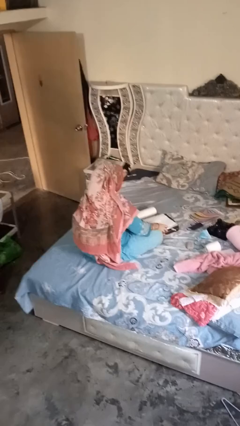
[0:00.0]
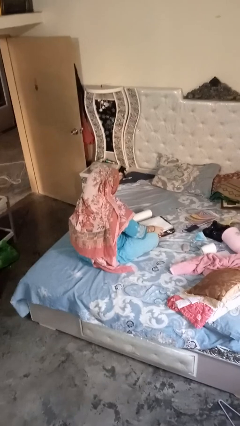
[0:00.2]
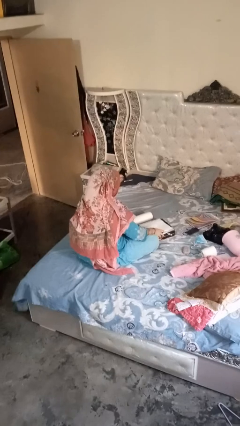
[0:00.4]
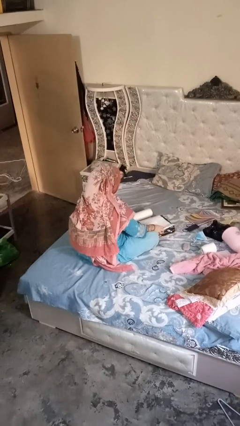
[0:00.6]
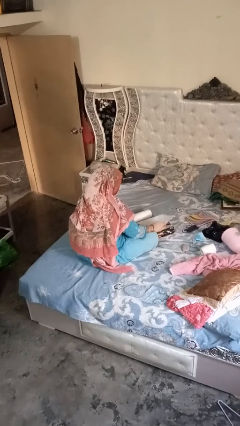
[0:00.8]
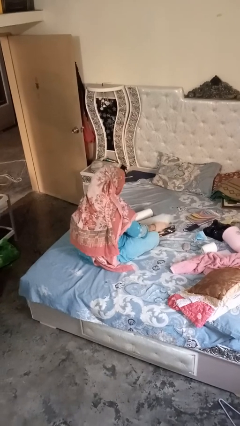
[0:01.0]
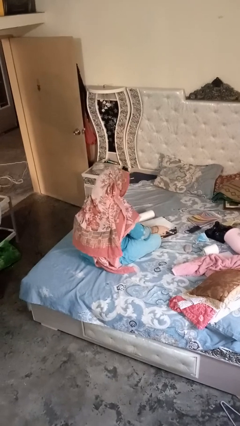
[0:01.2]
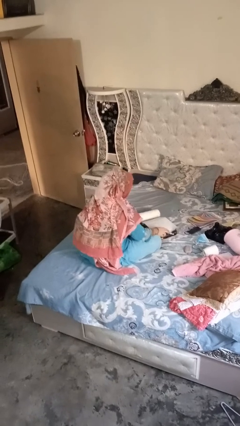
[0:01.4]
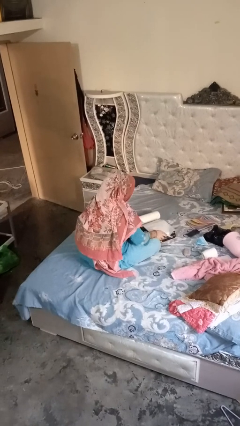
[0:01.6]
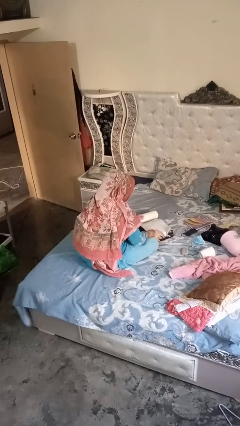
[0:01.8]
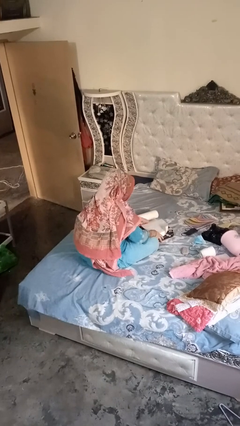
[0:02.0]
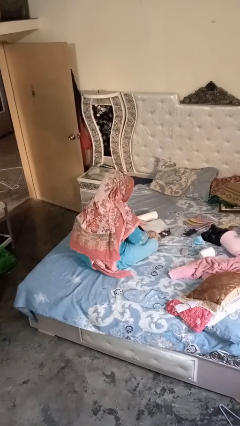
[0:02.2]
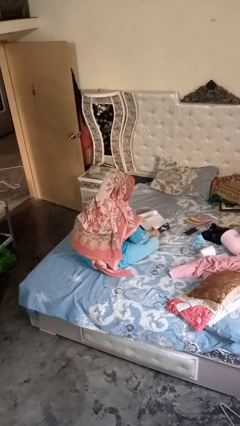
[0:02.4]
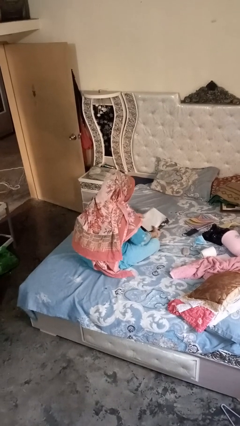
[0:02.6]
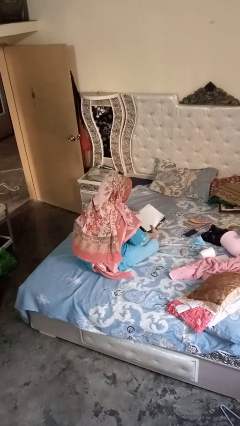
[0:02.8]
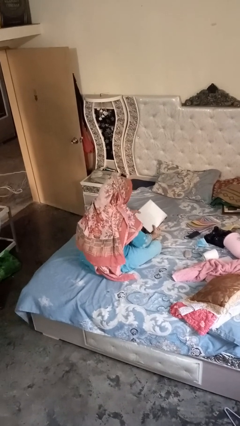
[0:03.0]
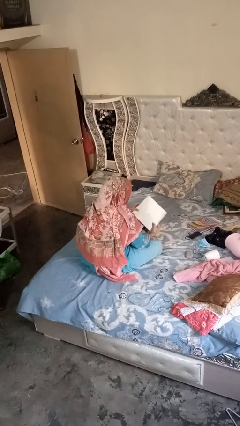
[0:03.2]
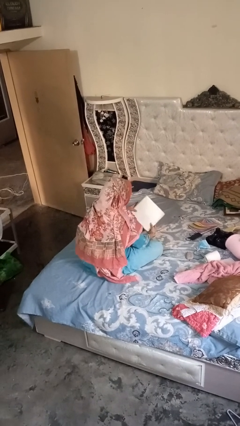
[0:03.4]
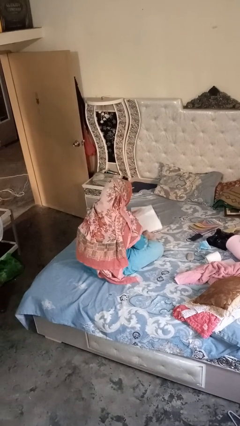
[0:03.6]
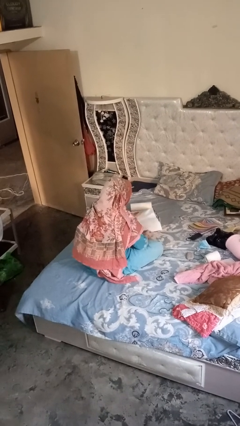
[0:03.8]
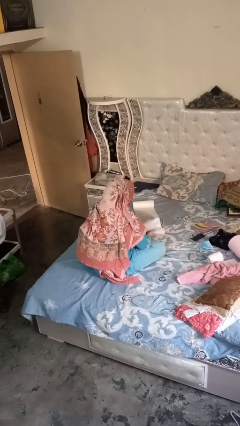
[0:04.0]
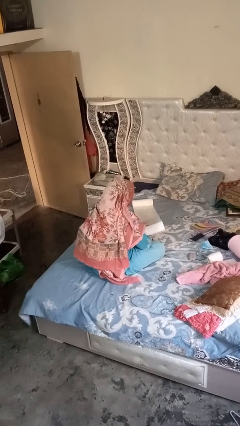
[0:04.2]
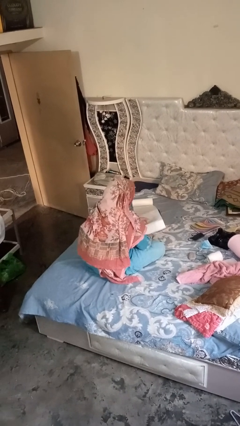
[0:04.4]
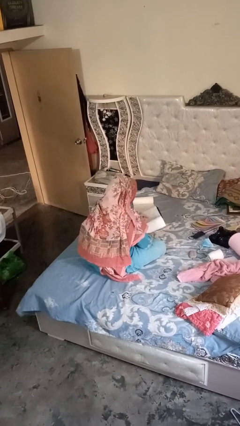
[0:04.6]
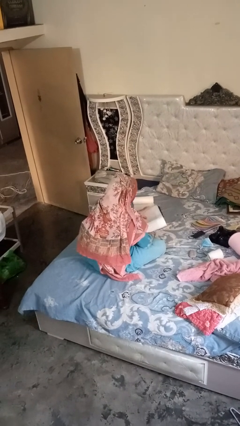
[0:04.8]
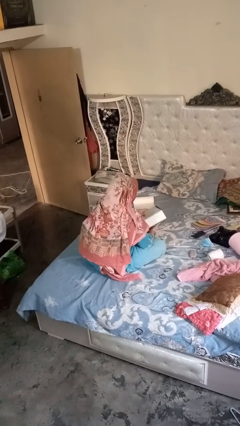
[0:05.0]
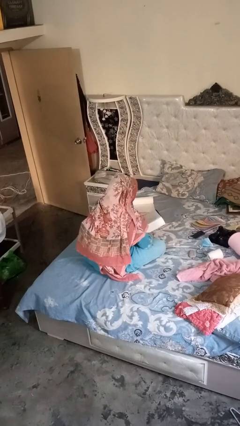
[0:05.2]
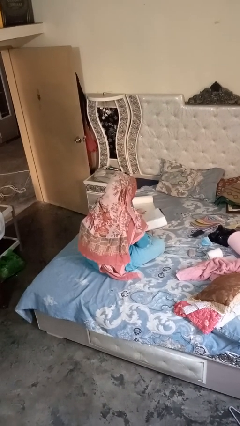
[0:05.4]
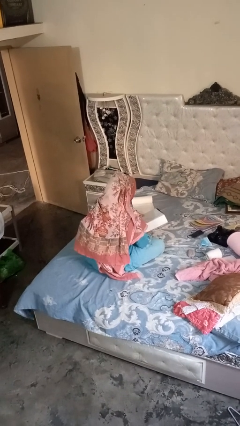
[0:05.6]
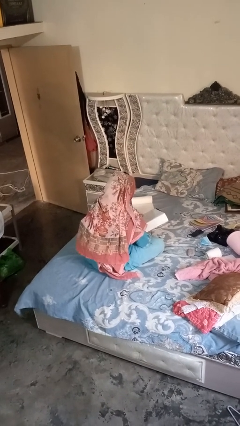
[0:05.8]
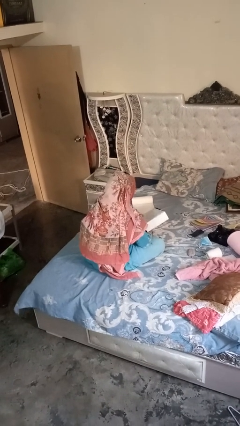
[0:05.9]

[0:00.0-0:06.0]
person wraps box

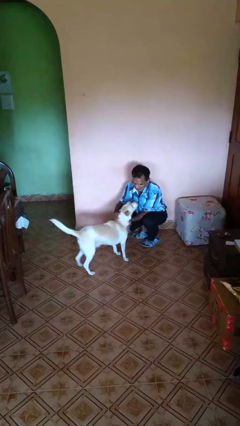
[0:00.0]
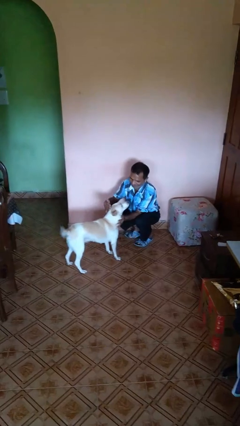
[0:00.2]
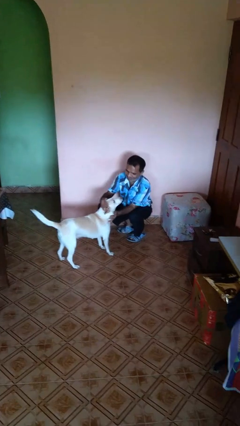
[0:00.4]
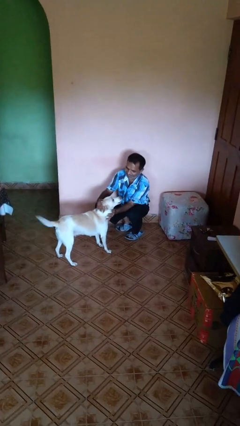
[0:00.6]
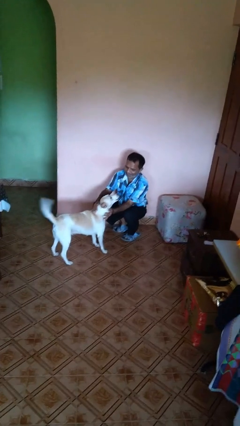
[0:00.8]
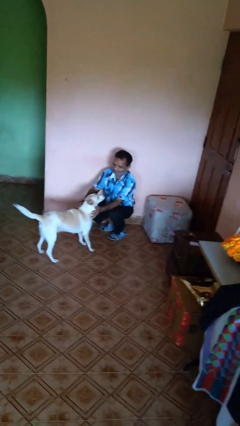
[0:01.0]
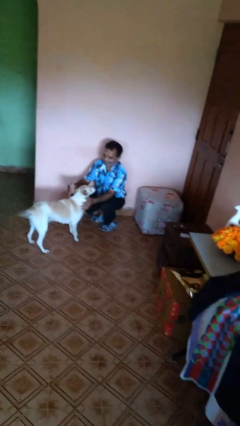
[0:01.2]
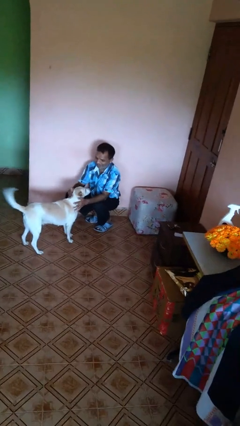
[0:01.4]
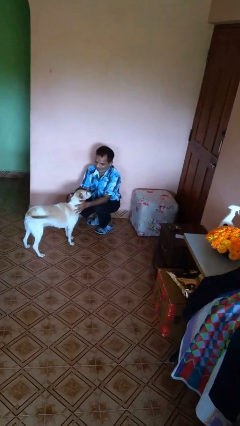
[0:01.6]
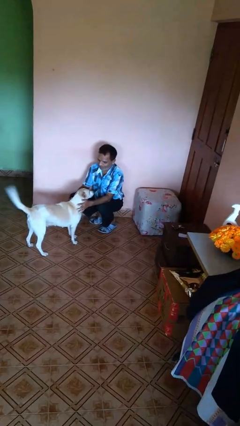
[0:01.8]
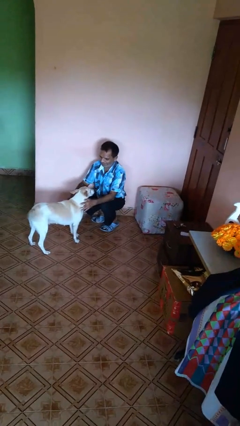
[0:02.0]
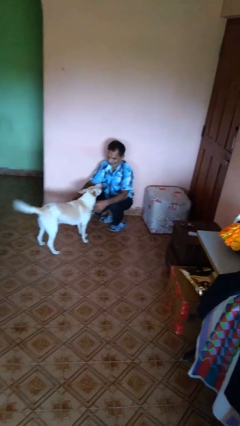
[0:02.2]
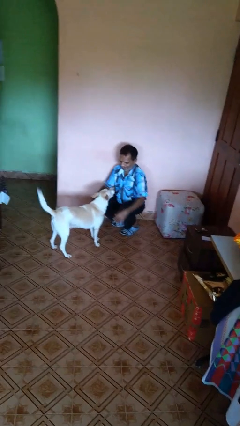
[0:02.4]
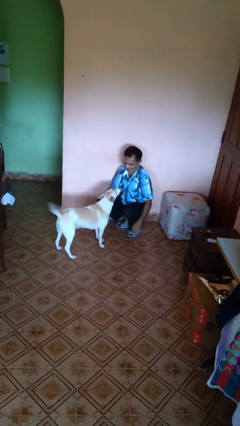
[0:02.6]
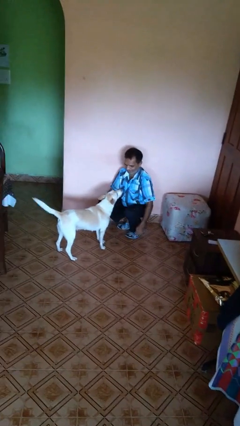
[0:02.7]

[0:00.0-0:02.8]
person pets dog

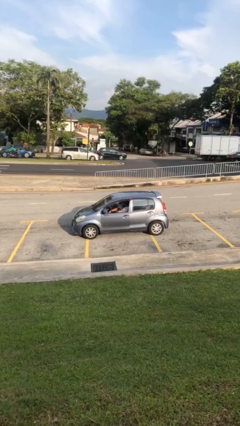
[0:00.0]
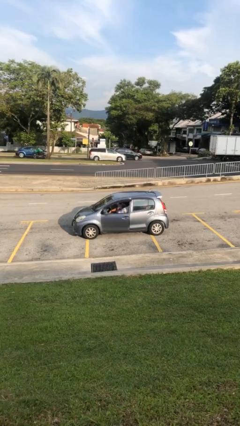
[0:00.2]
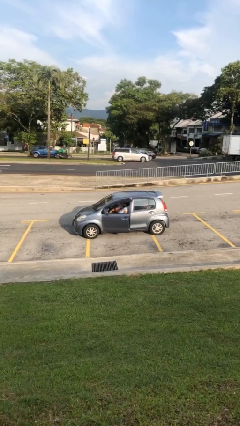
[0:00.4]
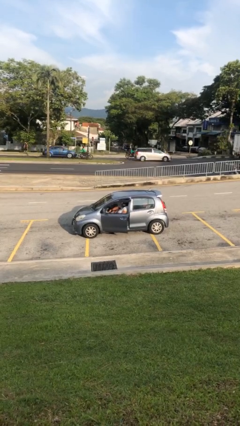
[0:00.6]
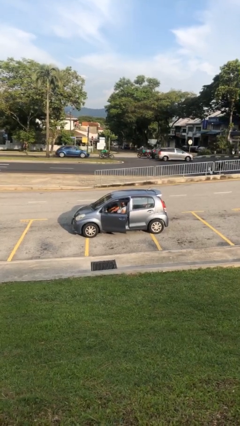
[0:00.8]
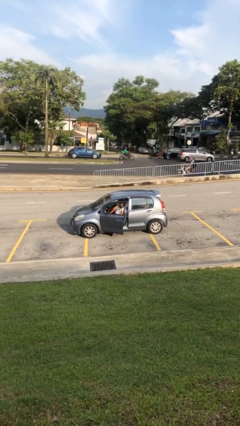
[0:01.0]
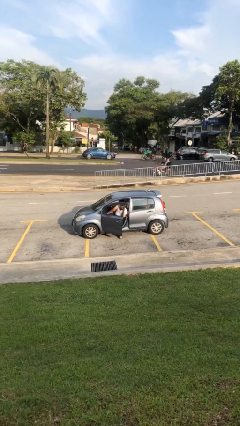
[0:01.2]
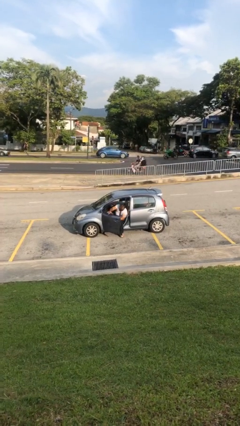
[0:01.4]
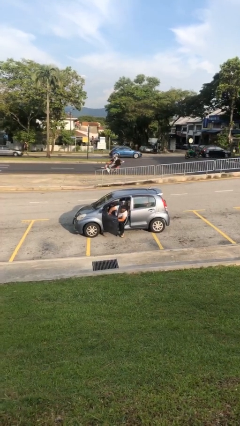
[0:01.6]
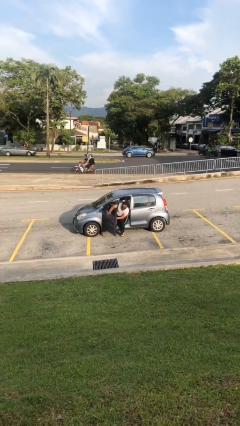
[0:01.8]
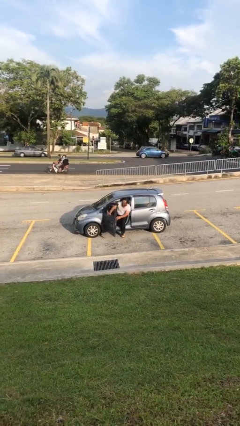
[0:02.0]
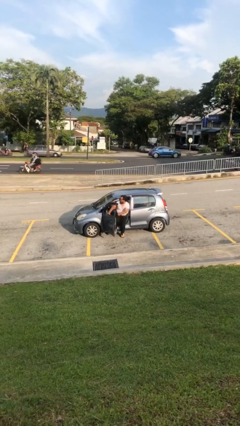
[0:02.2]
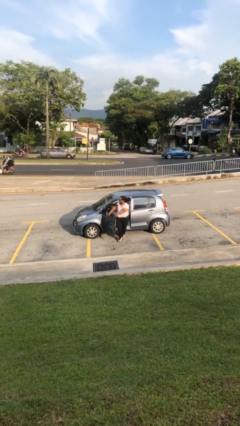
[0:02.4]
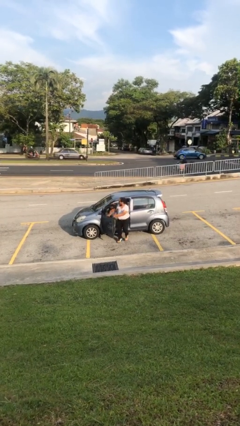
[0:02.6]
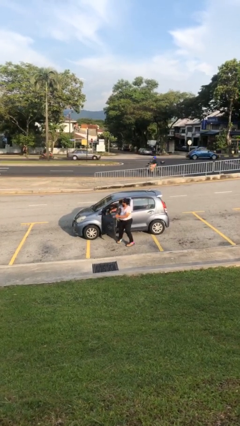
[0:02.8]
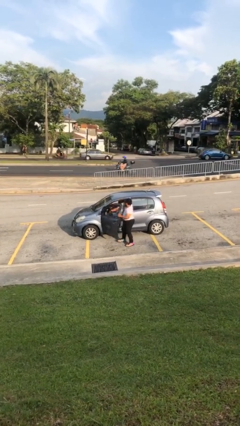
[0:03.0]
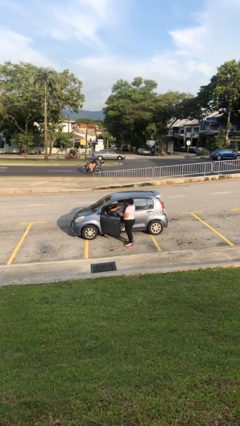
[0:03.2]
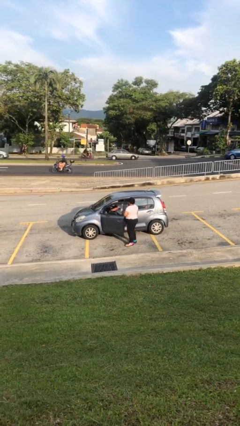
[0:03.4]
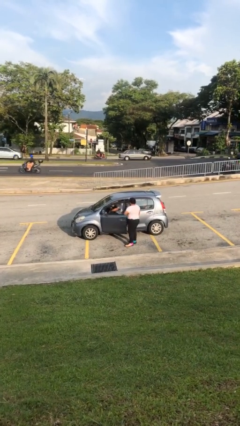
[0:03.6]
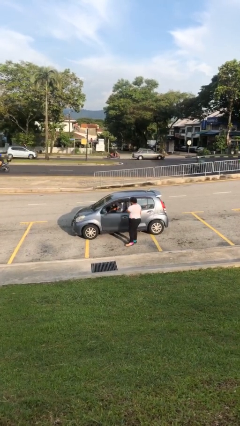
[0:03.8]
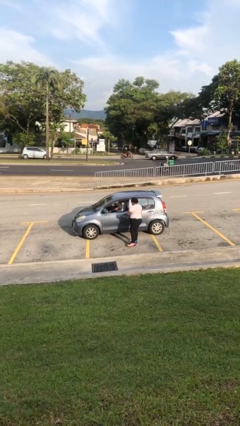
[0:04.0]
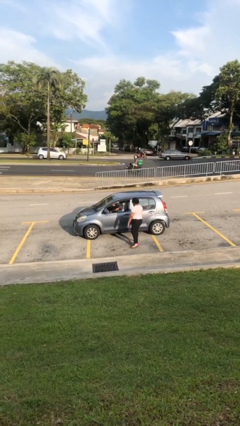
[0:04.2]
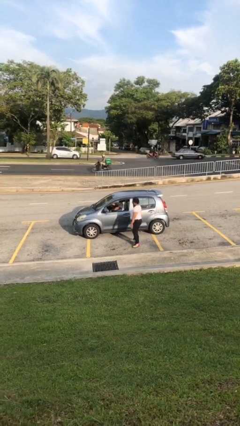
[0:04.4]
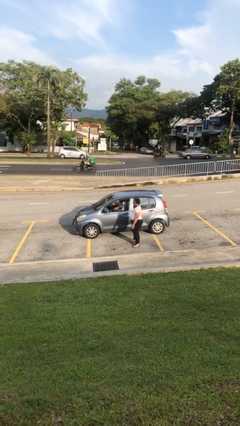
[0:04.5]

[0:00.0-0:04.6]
car drops off person

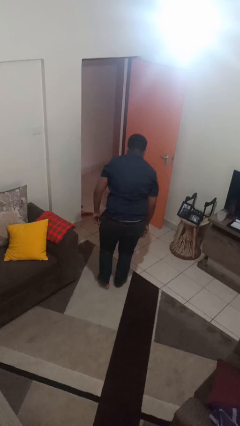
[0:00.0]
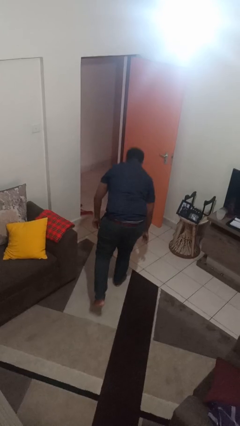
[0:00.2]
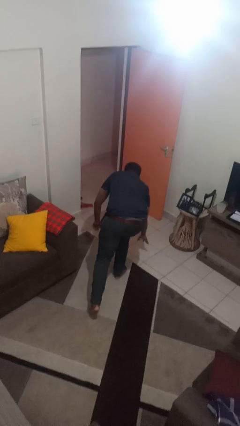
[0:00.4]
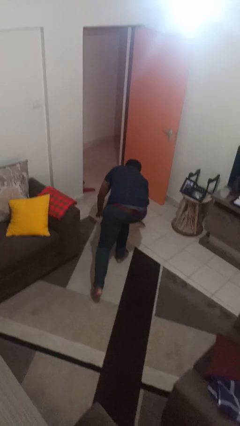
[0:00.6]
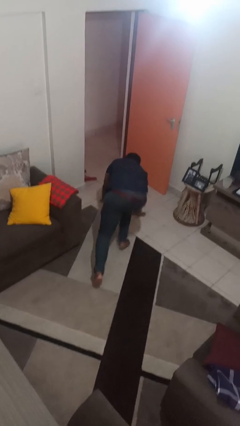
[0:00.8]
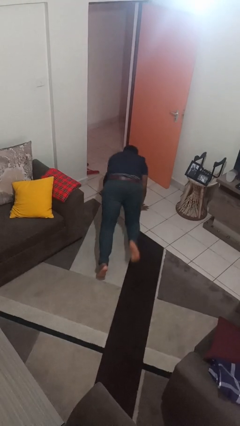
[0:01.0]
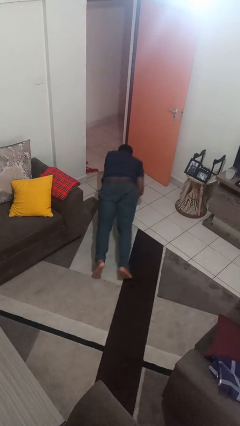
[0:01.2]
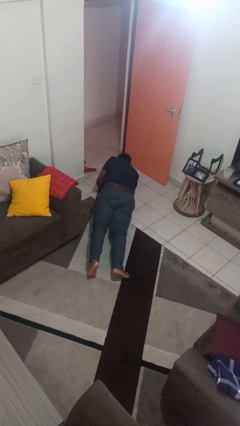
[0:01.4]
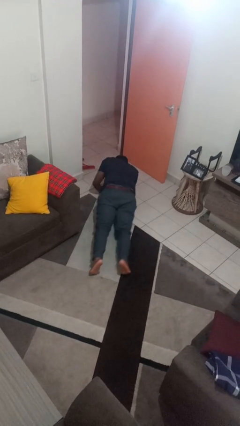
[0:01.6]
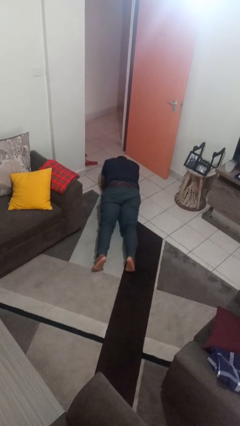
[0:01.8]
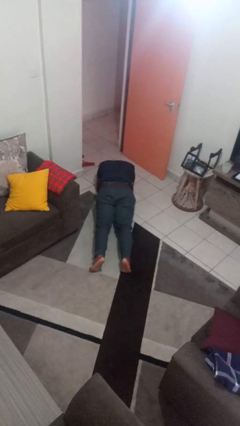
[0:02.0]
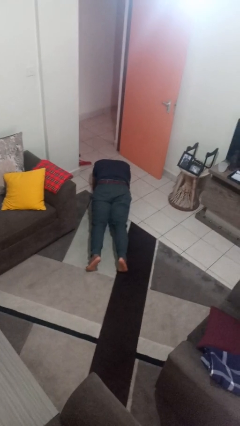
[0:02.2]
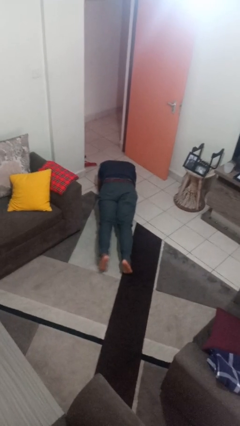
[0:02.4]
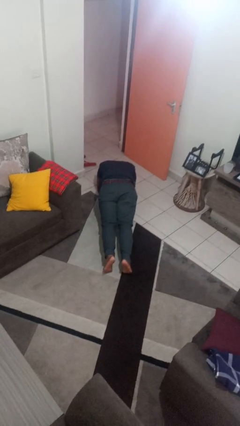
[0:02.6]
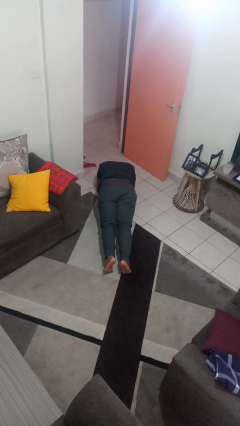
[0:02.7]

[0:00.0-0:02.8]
person exercises with plank

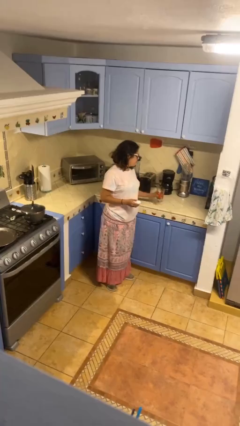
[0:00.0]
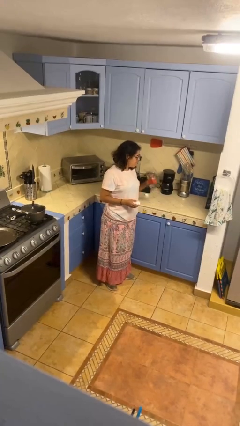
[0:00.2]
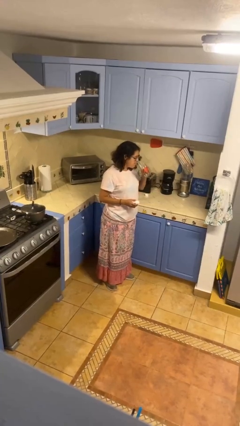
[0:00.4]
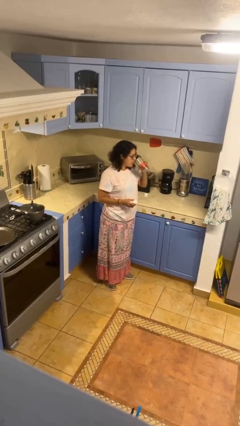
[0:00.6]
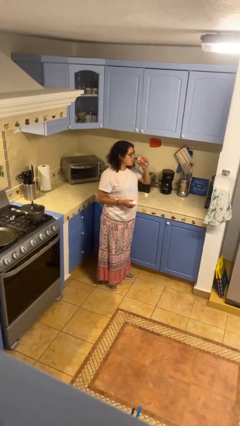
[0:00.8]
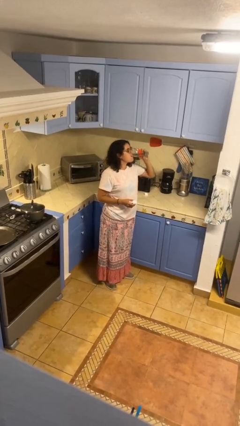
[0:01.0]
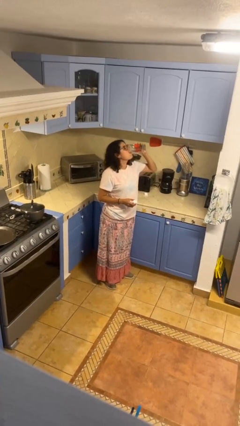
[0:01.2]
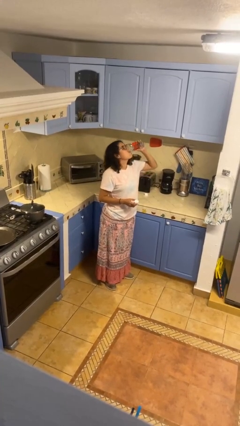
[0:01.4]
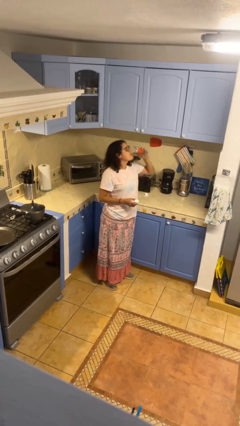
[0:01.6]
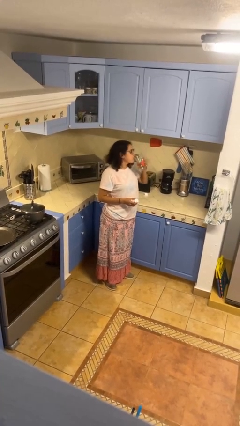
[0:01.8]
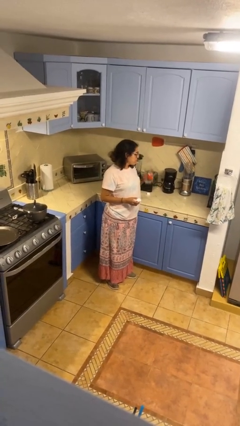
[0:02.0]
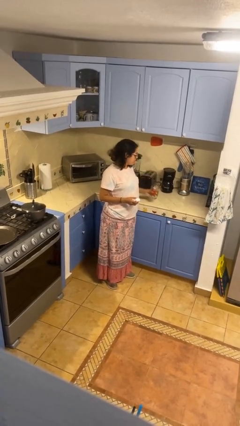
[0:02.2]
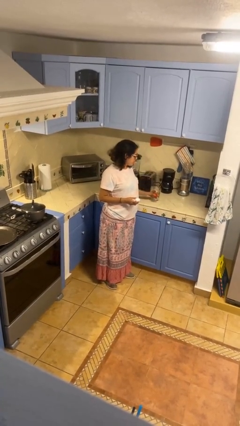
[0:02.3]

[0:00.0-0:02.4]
person drinks from cup
